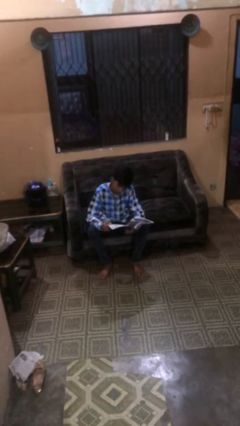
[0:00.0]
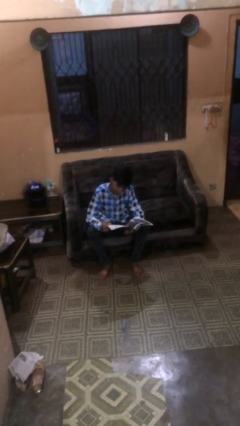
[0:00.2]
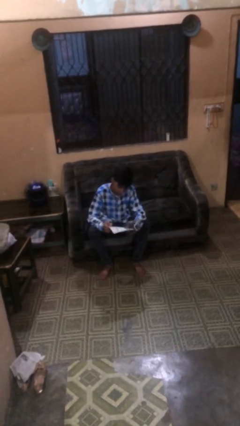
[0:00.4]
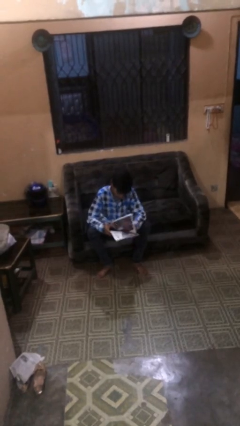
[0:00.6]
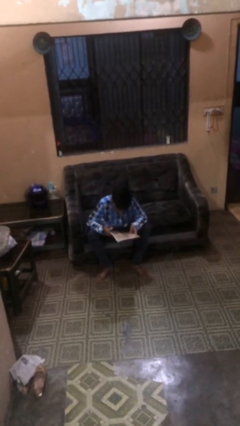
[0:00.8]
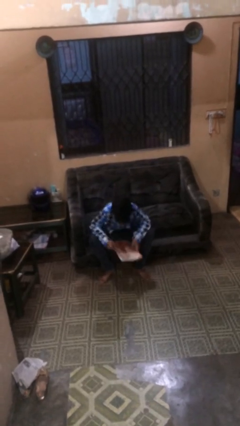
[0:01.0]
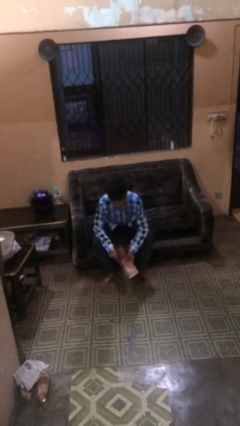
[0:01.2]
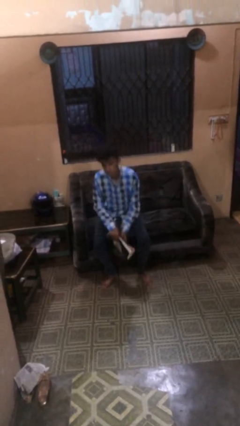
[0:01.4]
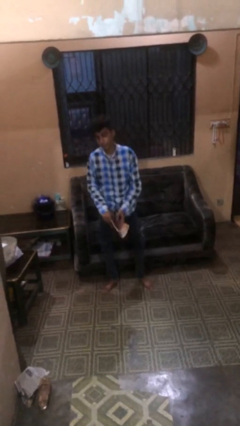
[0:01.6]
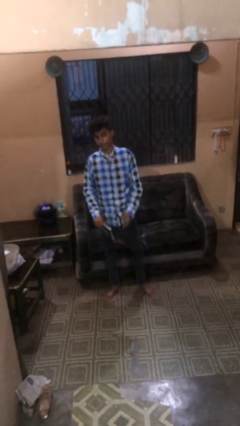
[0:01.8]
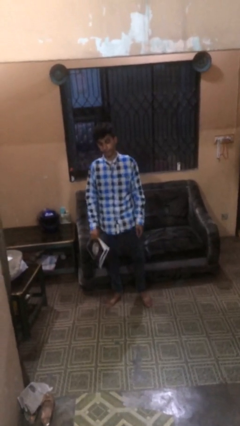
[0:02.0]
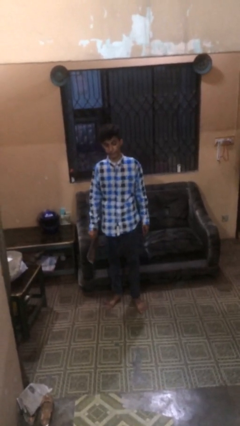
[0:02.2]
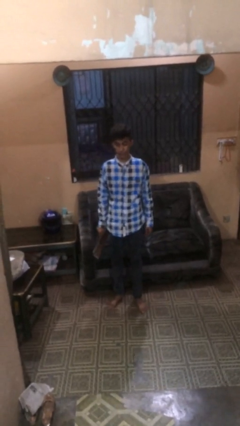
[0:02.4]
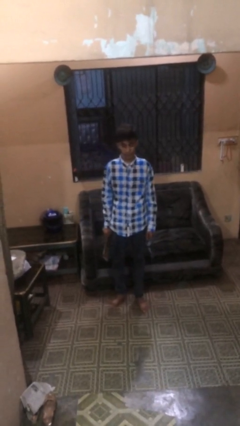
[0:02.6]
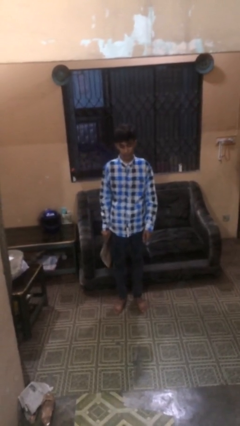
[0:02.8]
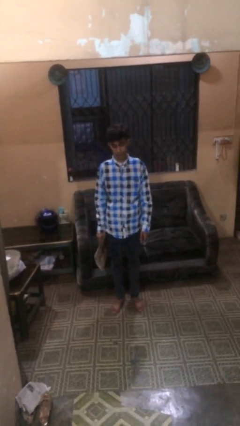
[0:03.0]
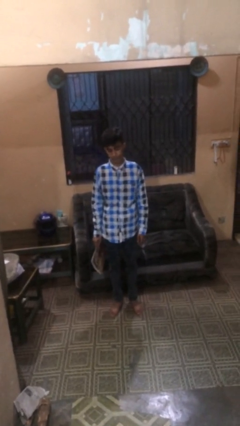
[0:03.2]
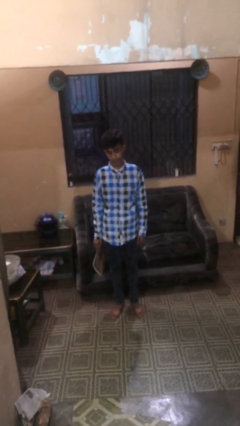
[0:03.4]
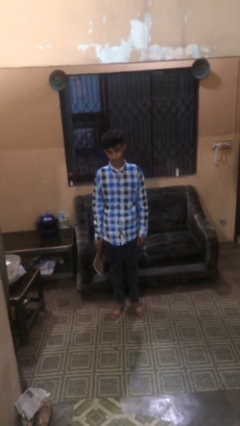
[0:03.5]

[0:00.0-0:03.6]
person stands up

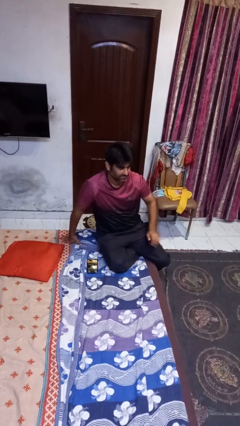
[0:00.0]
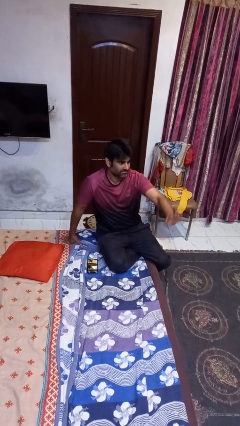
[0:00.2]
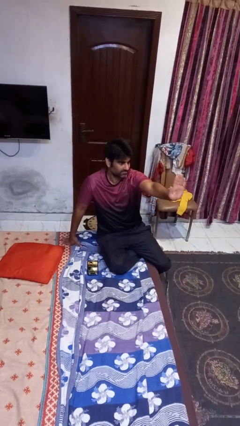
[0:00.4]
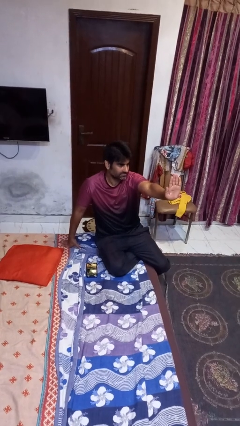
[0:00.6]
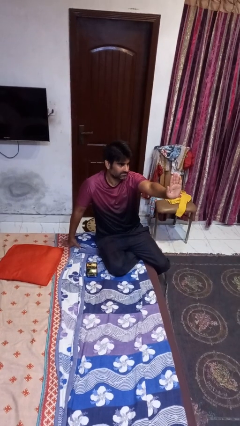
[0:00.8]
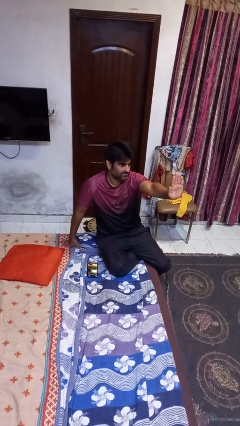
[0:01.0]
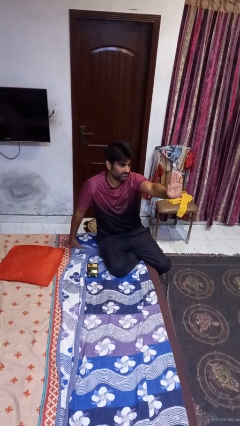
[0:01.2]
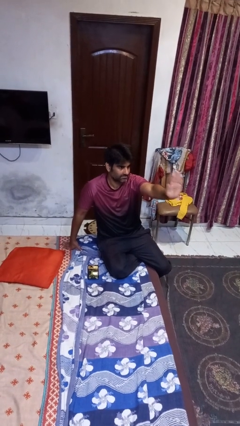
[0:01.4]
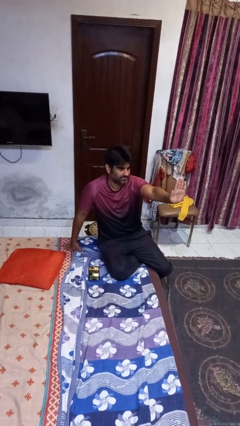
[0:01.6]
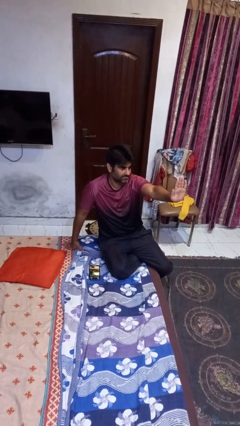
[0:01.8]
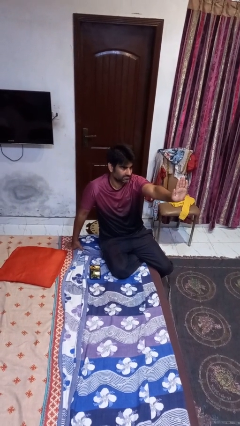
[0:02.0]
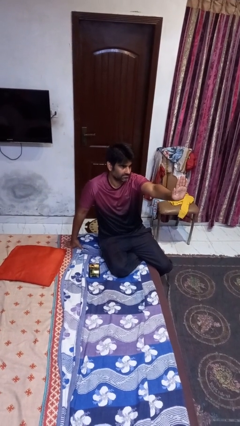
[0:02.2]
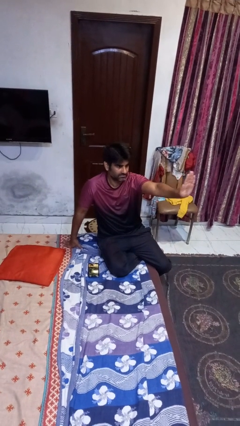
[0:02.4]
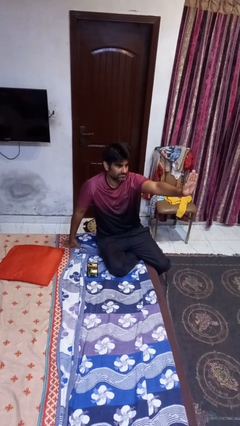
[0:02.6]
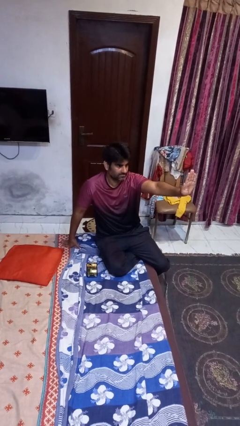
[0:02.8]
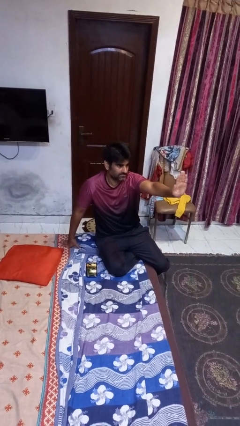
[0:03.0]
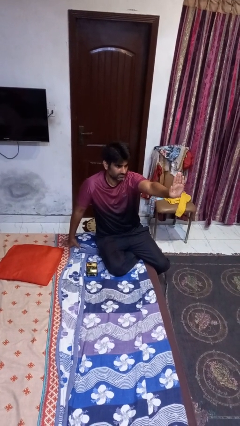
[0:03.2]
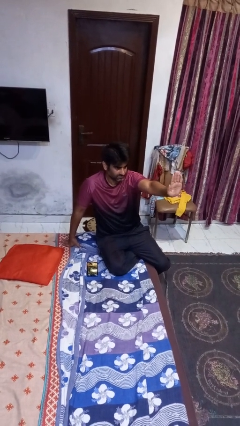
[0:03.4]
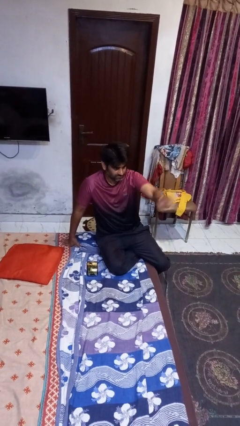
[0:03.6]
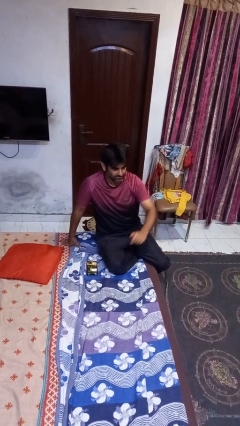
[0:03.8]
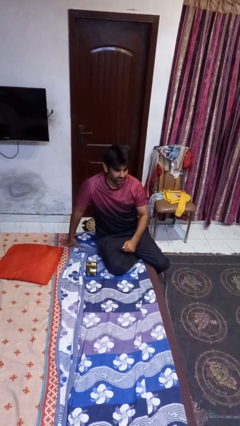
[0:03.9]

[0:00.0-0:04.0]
person gestures stop

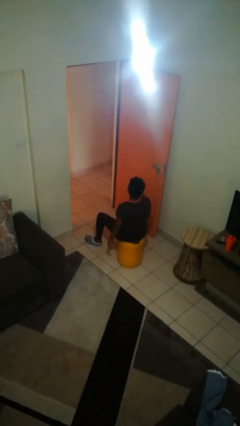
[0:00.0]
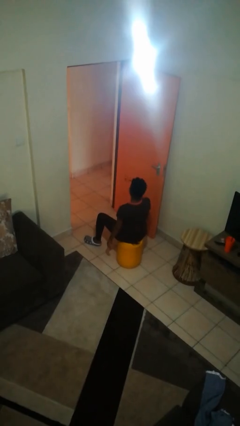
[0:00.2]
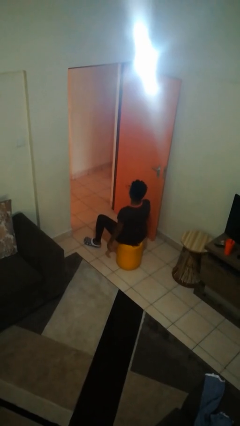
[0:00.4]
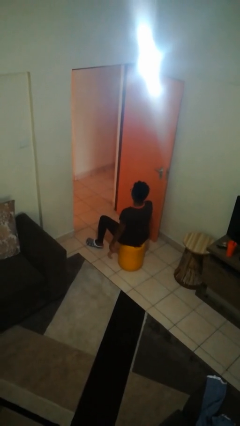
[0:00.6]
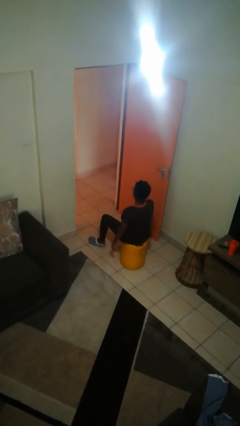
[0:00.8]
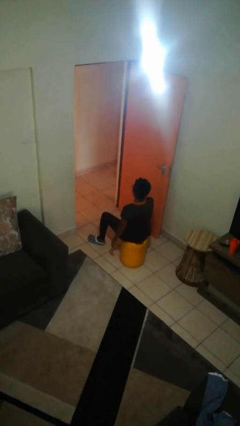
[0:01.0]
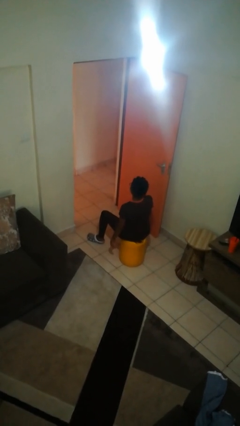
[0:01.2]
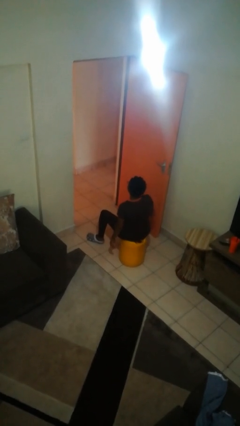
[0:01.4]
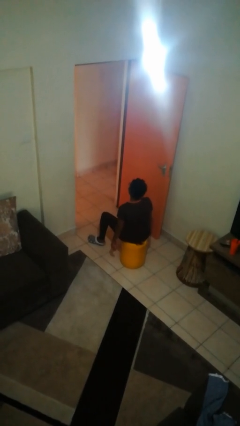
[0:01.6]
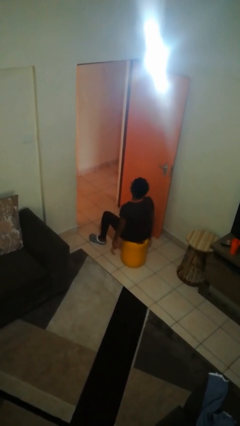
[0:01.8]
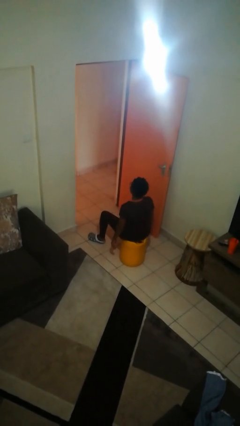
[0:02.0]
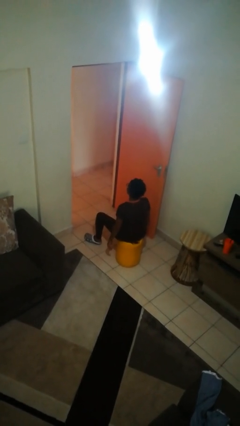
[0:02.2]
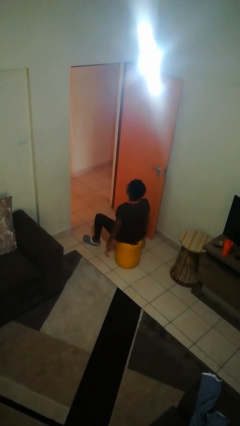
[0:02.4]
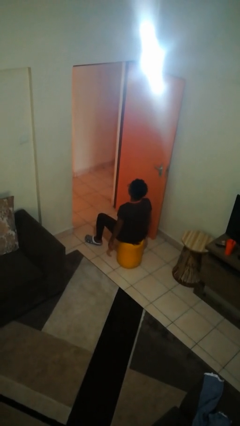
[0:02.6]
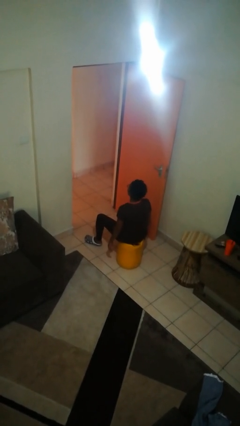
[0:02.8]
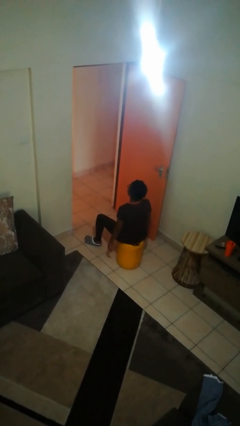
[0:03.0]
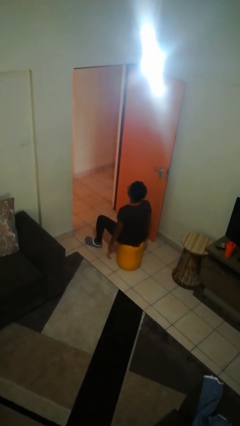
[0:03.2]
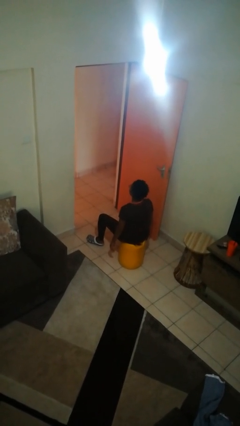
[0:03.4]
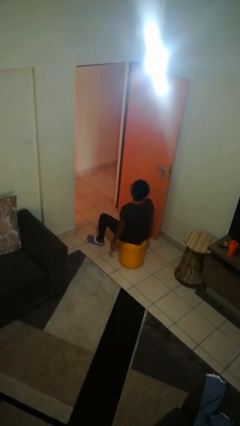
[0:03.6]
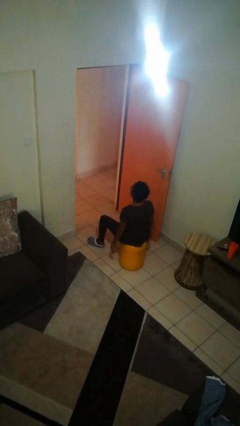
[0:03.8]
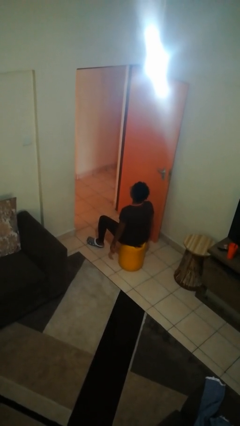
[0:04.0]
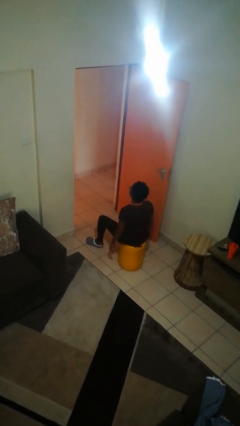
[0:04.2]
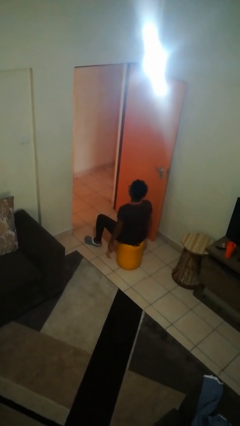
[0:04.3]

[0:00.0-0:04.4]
person puts on glasses

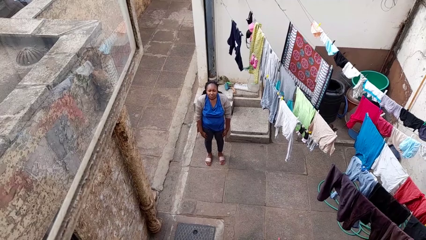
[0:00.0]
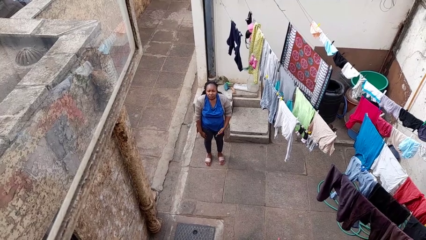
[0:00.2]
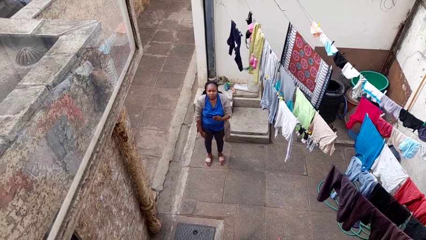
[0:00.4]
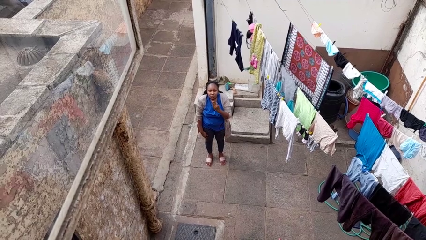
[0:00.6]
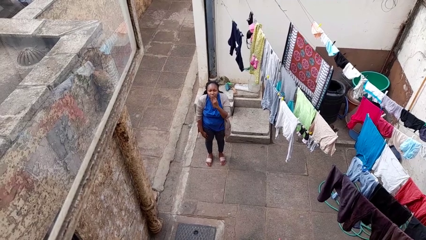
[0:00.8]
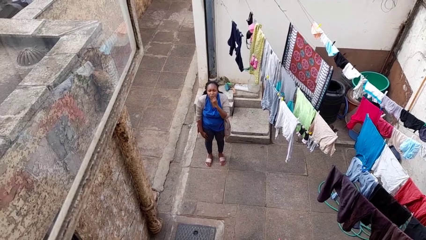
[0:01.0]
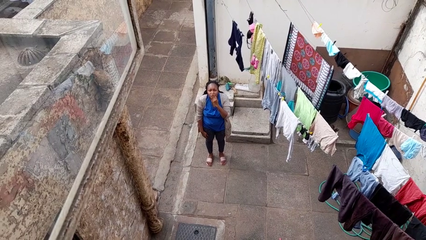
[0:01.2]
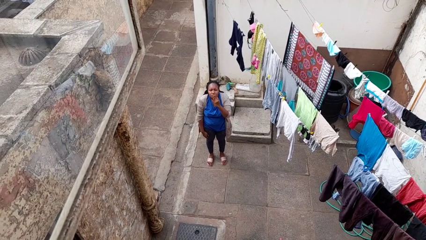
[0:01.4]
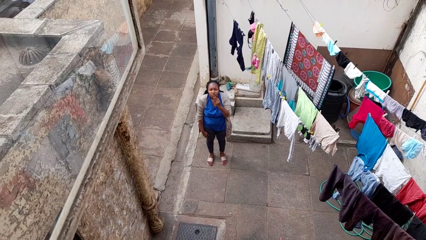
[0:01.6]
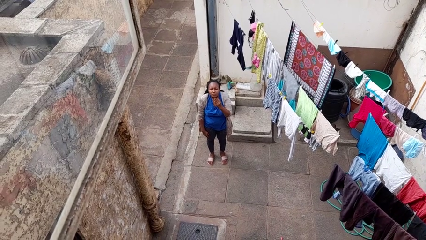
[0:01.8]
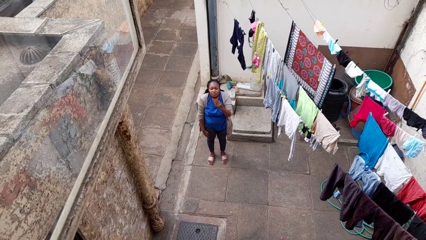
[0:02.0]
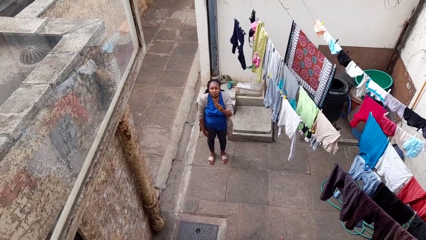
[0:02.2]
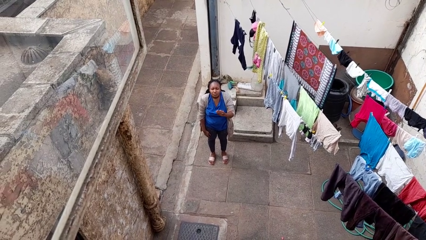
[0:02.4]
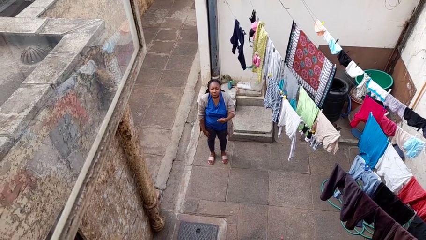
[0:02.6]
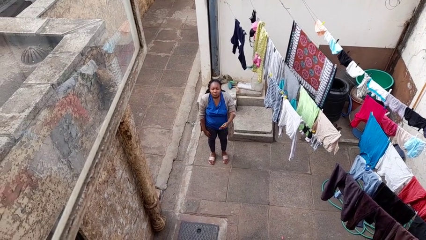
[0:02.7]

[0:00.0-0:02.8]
person gestures blow kiss

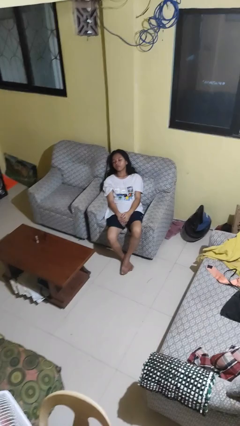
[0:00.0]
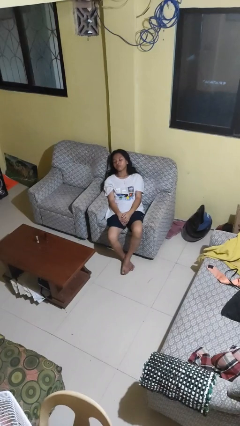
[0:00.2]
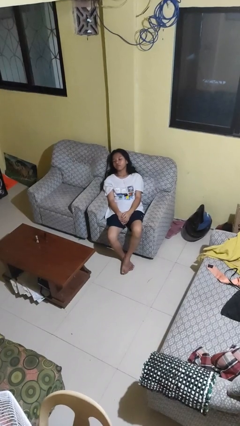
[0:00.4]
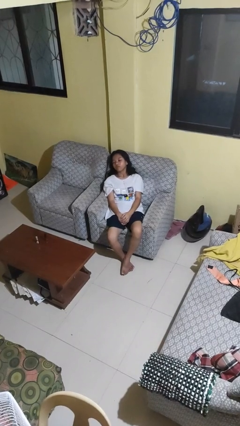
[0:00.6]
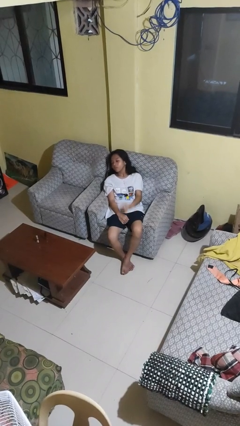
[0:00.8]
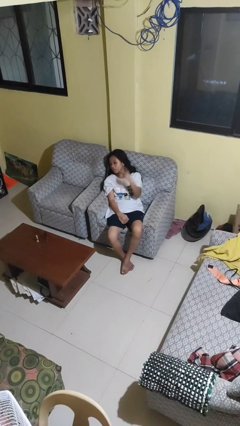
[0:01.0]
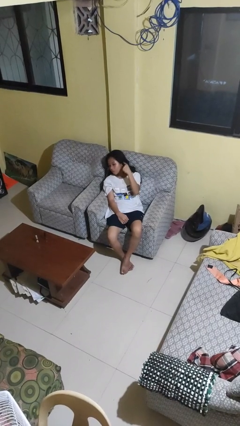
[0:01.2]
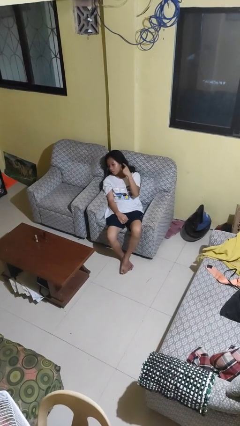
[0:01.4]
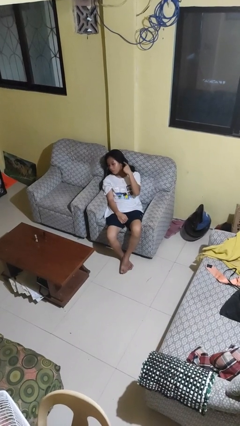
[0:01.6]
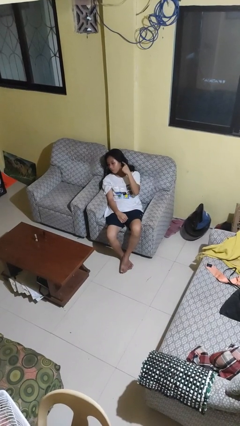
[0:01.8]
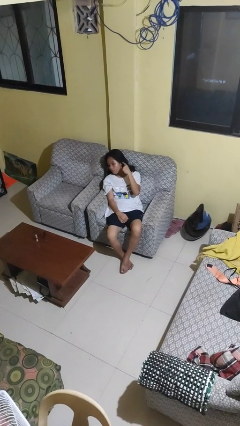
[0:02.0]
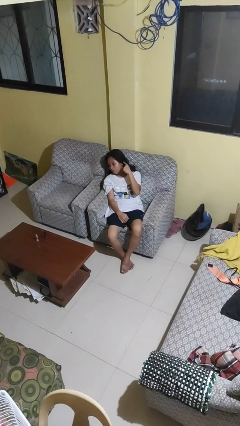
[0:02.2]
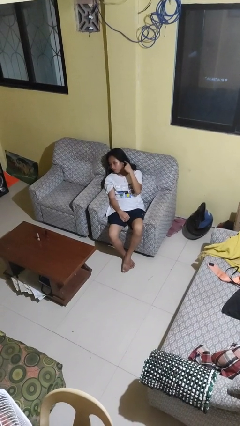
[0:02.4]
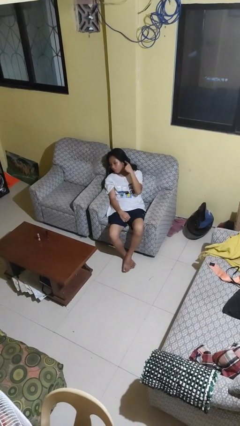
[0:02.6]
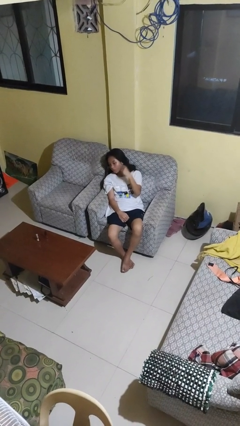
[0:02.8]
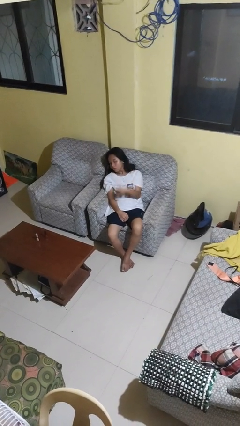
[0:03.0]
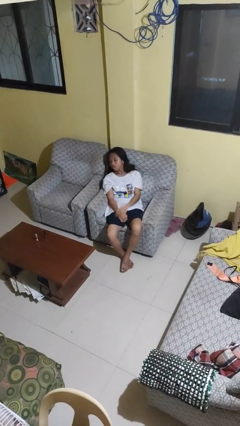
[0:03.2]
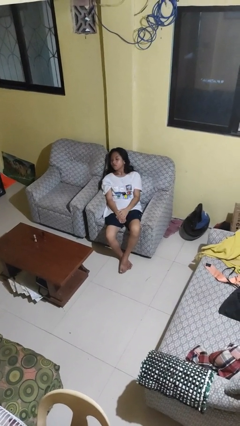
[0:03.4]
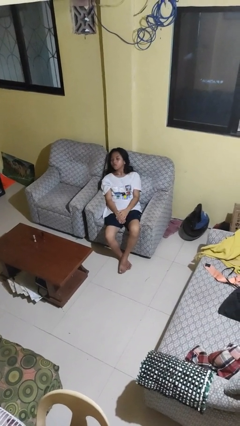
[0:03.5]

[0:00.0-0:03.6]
person gestures listen closely
